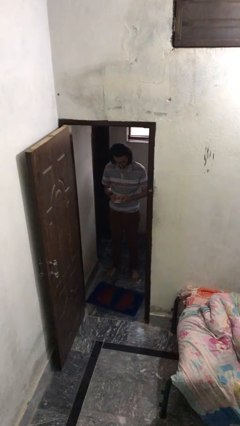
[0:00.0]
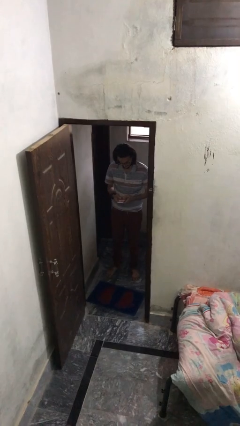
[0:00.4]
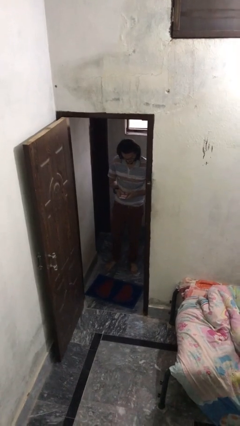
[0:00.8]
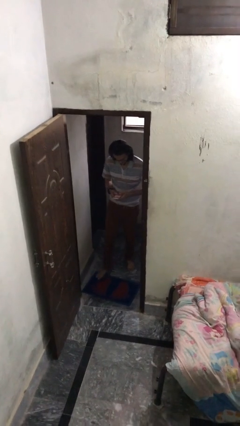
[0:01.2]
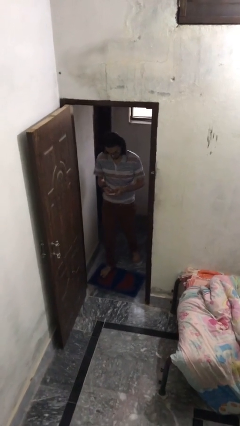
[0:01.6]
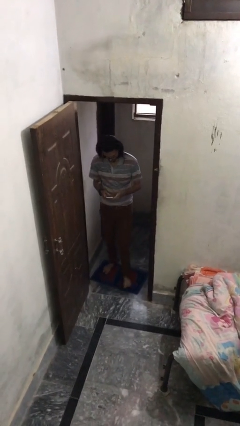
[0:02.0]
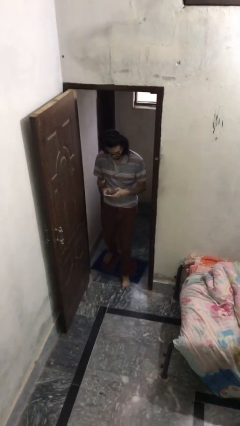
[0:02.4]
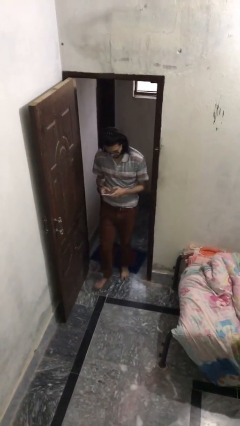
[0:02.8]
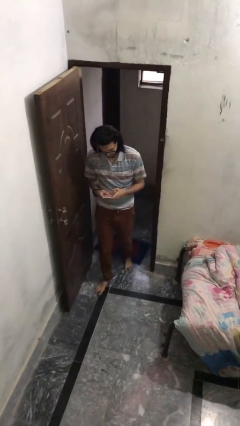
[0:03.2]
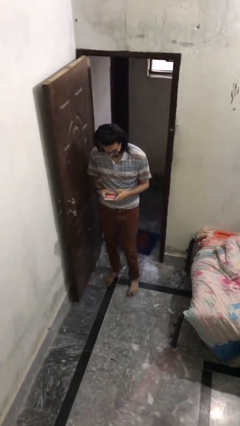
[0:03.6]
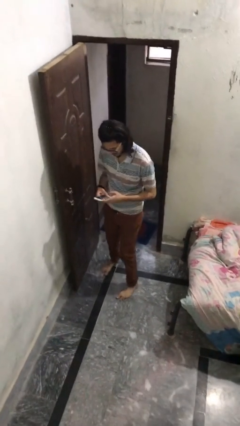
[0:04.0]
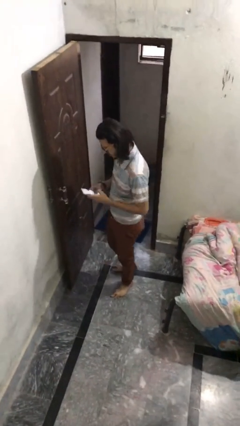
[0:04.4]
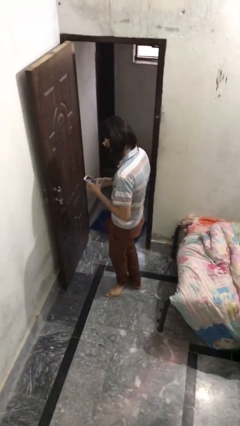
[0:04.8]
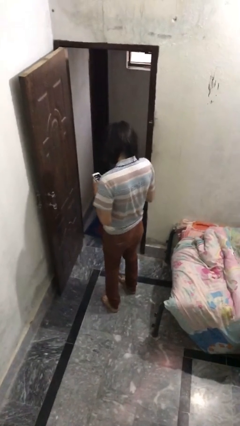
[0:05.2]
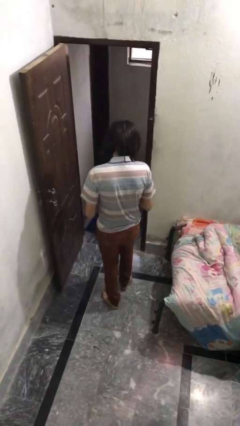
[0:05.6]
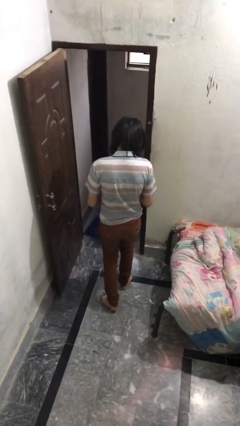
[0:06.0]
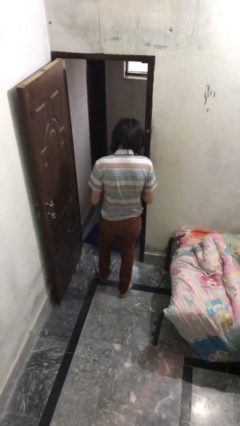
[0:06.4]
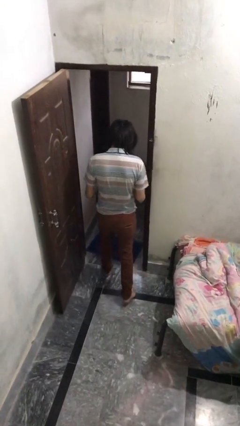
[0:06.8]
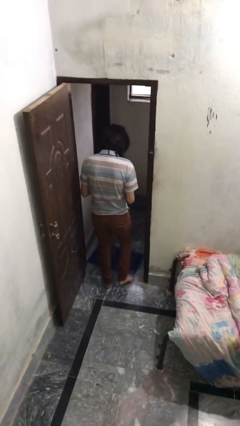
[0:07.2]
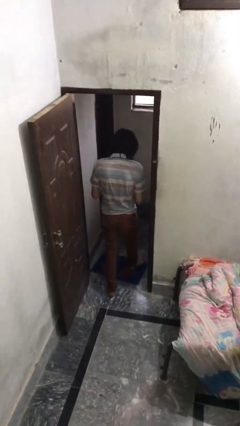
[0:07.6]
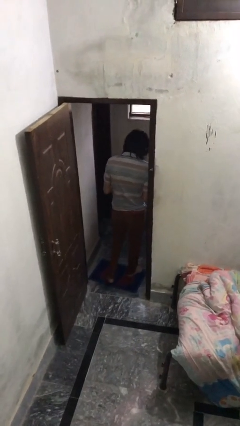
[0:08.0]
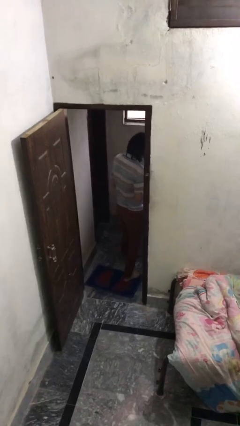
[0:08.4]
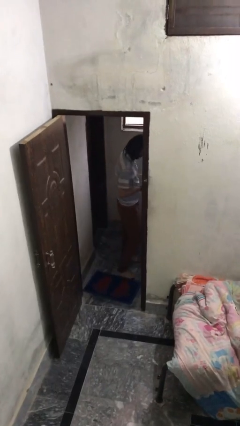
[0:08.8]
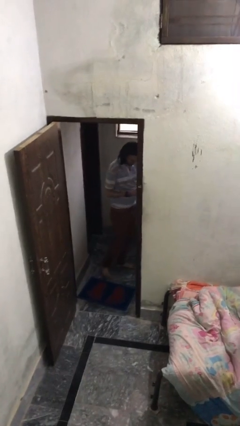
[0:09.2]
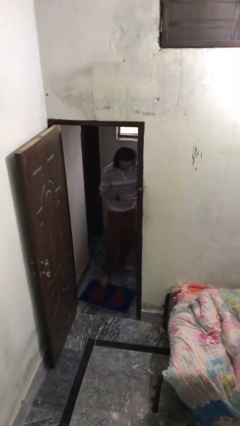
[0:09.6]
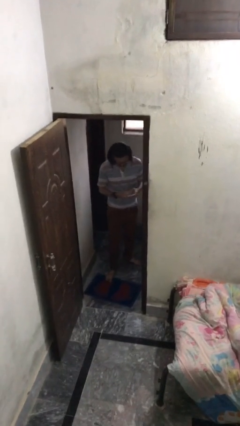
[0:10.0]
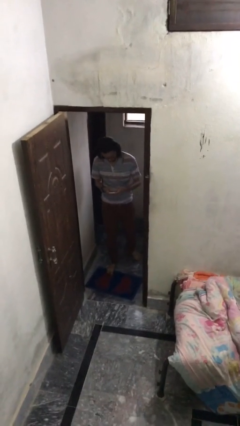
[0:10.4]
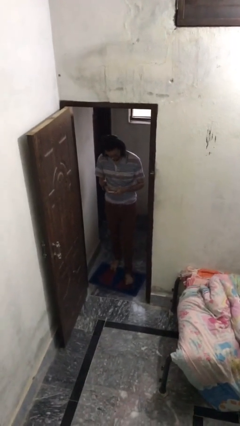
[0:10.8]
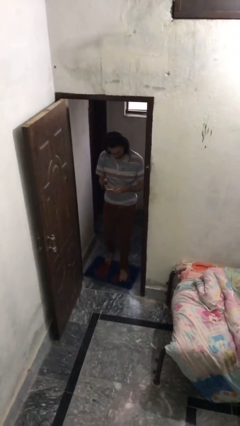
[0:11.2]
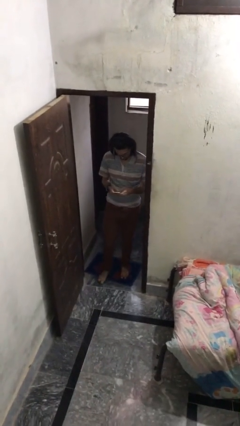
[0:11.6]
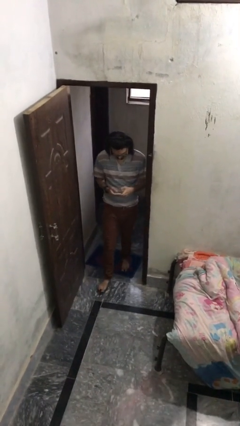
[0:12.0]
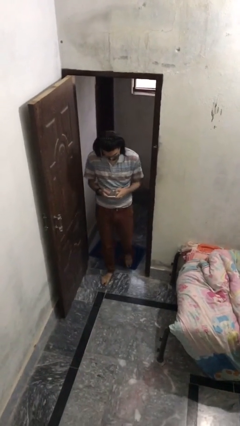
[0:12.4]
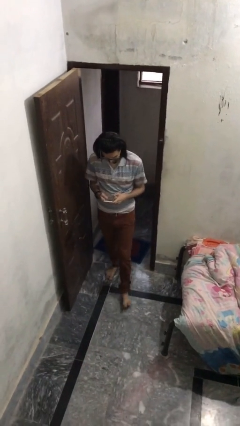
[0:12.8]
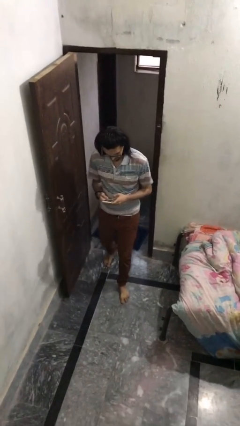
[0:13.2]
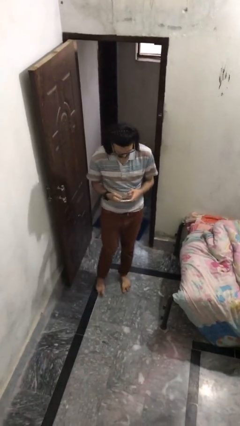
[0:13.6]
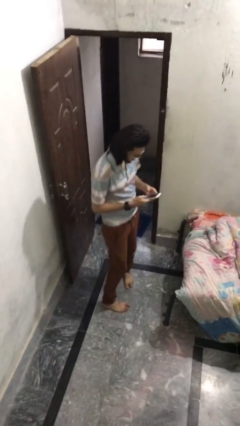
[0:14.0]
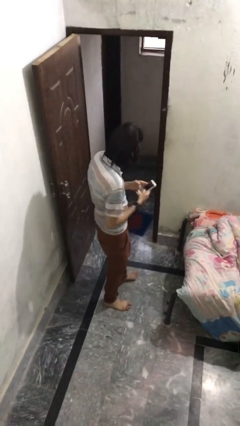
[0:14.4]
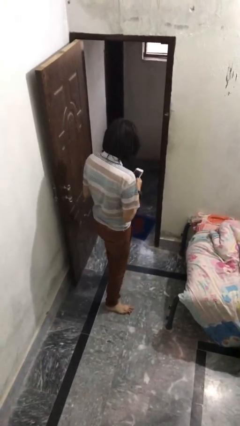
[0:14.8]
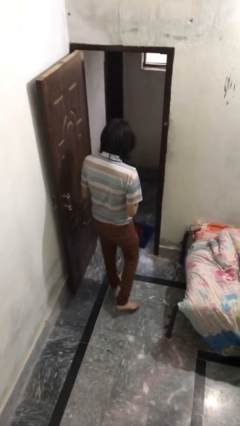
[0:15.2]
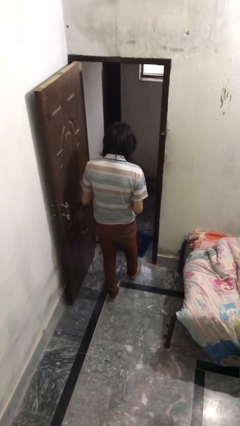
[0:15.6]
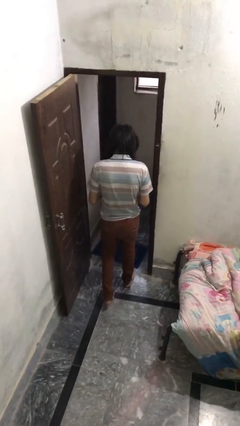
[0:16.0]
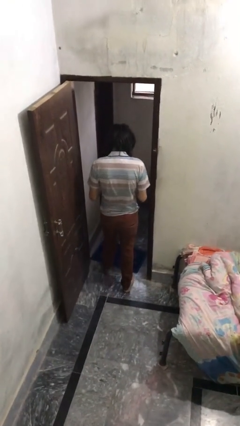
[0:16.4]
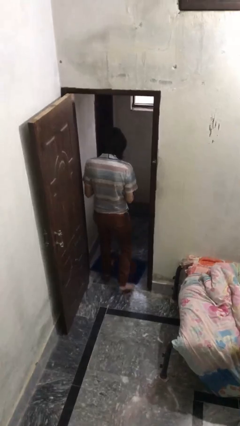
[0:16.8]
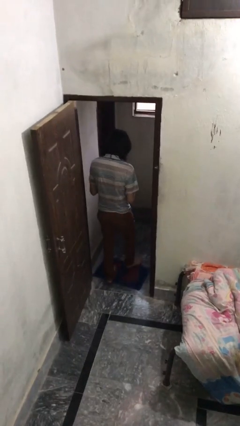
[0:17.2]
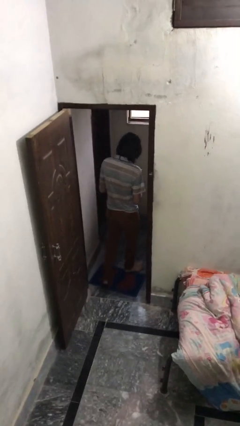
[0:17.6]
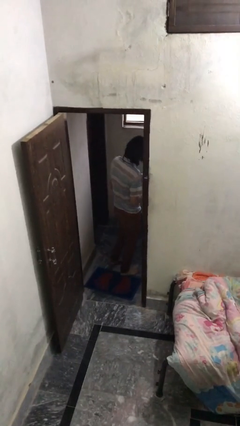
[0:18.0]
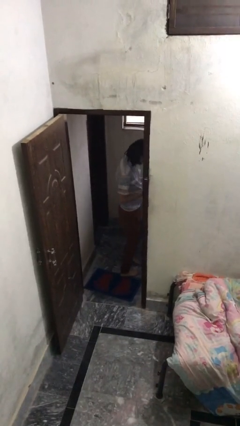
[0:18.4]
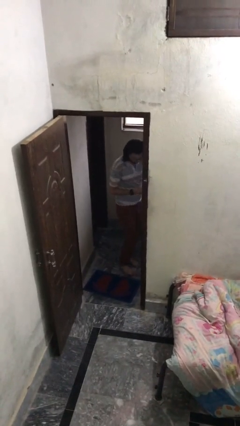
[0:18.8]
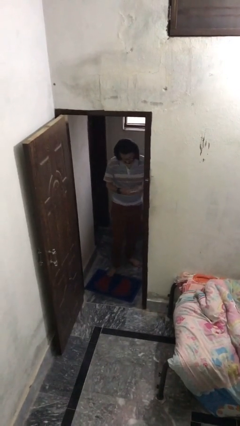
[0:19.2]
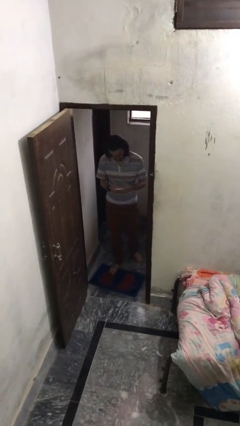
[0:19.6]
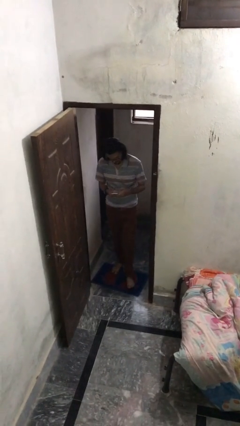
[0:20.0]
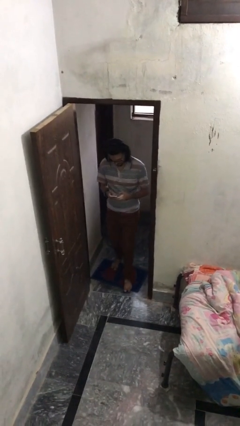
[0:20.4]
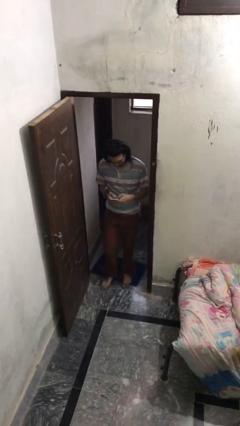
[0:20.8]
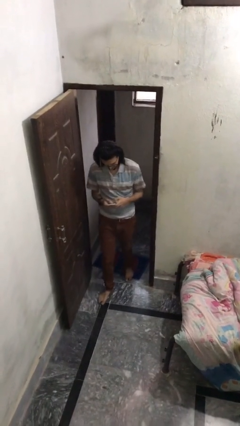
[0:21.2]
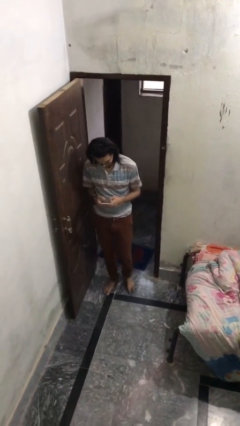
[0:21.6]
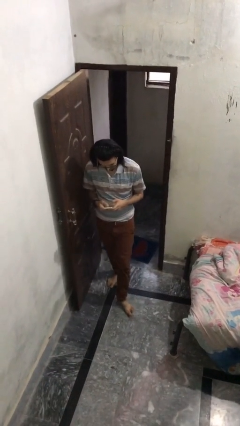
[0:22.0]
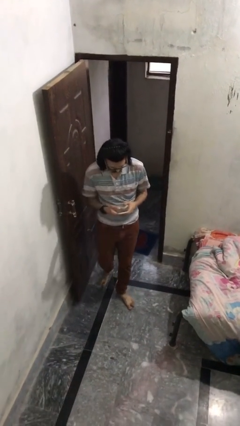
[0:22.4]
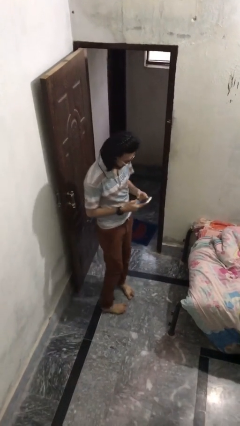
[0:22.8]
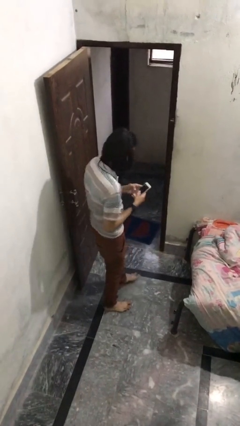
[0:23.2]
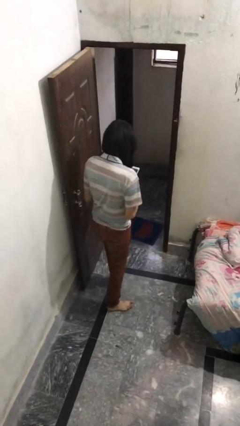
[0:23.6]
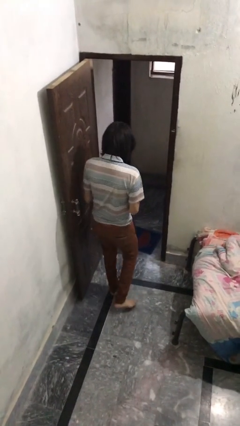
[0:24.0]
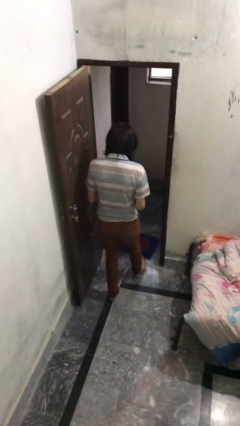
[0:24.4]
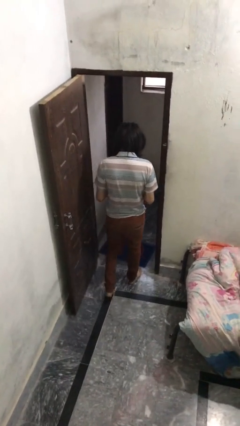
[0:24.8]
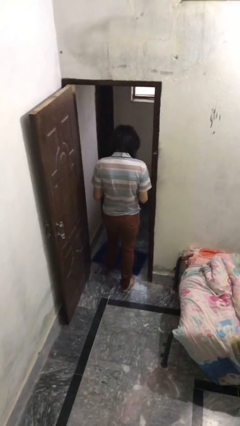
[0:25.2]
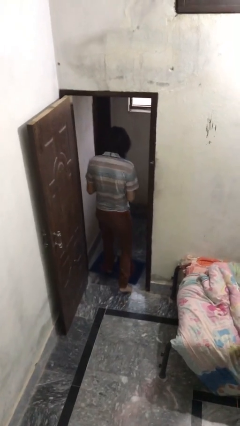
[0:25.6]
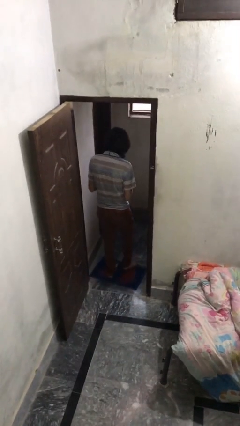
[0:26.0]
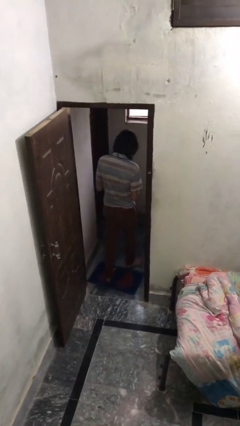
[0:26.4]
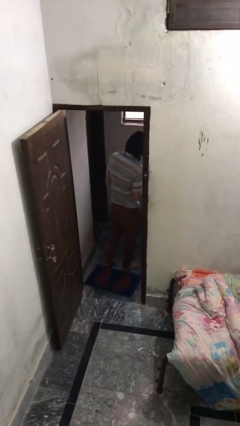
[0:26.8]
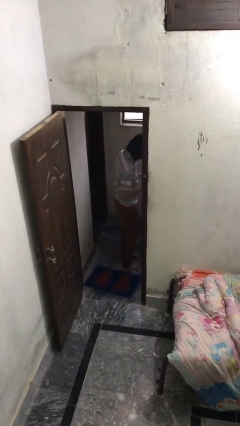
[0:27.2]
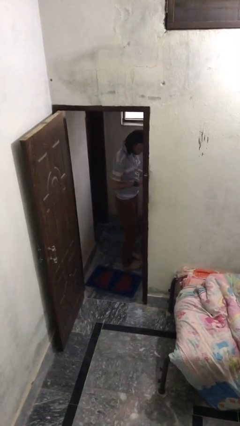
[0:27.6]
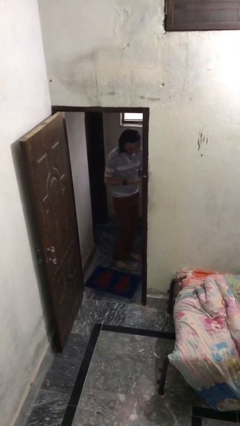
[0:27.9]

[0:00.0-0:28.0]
person texts on phone

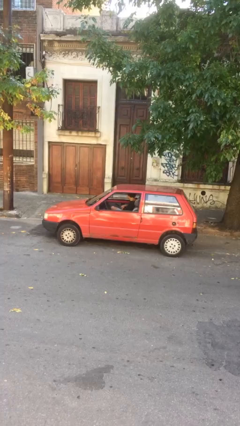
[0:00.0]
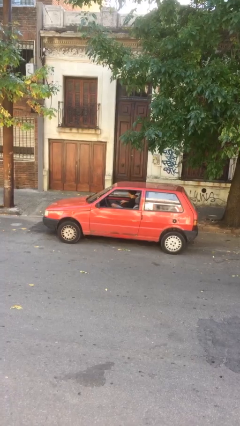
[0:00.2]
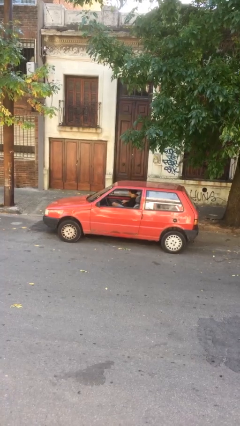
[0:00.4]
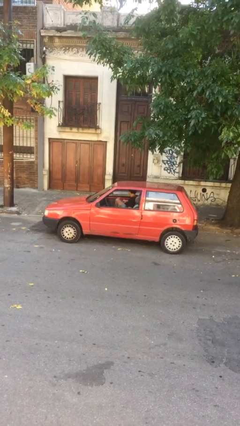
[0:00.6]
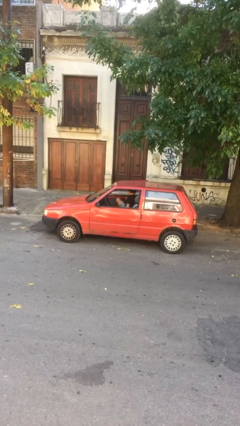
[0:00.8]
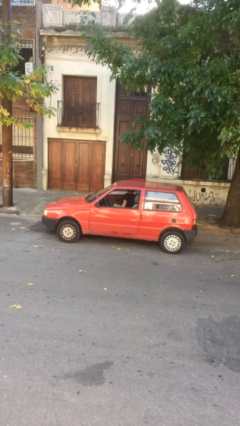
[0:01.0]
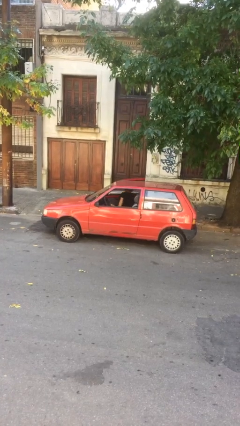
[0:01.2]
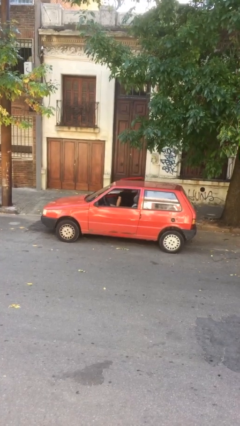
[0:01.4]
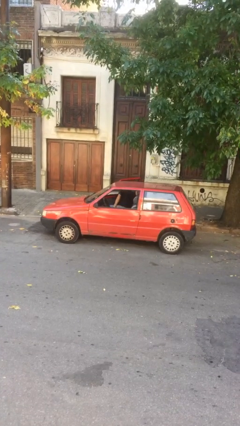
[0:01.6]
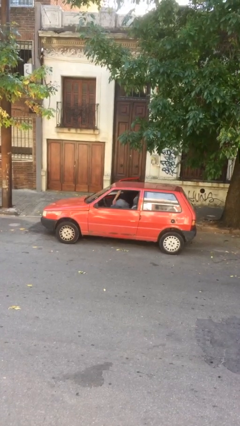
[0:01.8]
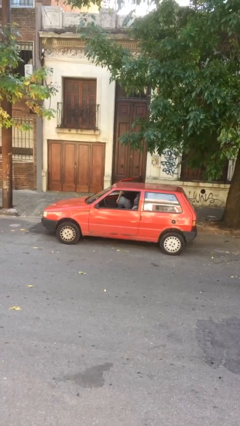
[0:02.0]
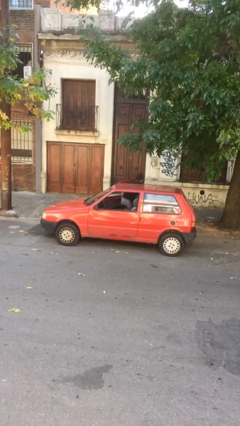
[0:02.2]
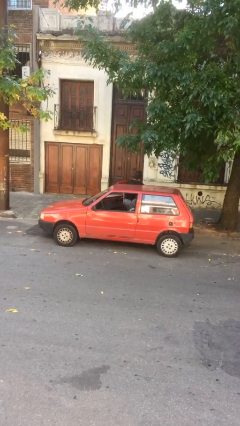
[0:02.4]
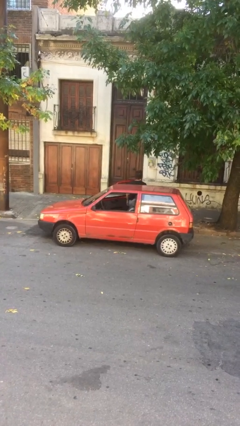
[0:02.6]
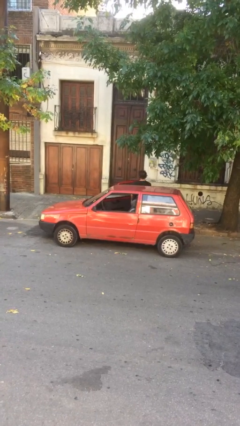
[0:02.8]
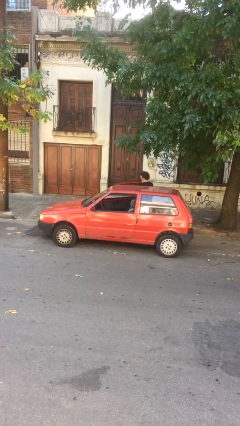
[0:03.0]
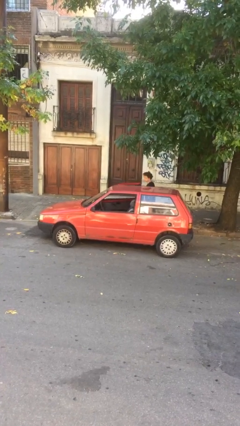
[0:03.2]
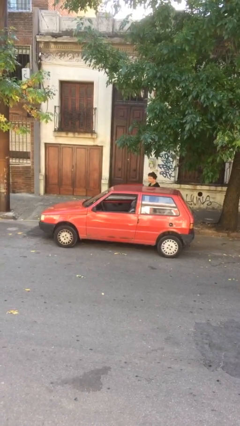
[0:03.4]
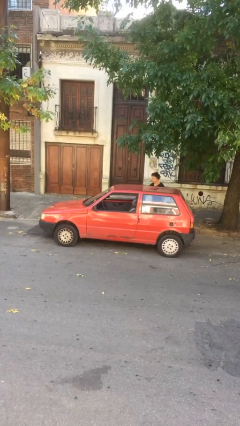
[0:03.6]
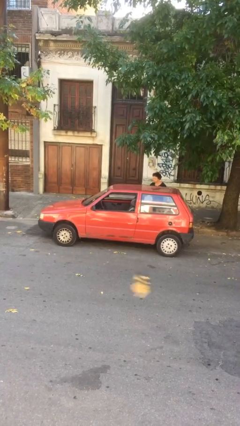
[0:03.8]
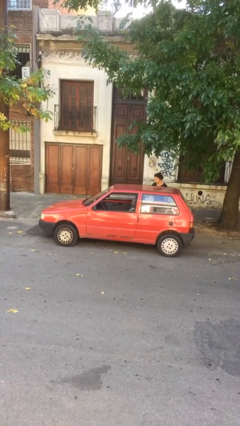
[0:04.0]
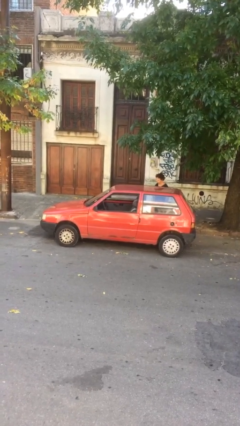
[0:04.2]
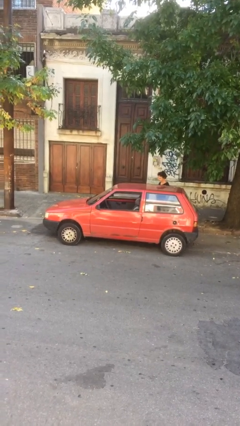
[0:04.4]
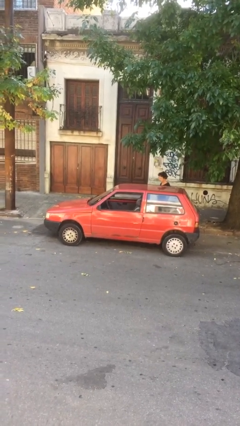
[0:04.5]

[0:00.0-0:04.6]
car drops off person
